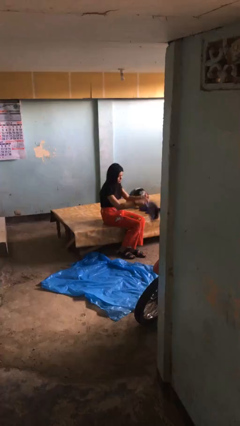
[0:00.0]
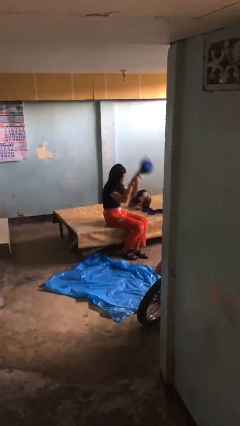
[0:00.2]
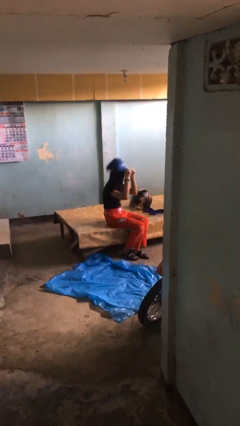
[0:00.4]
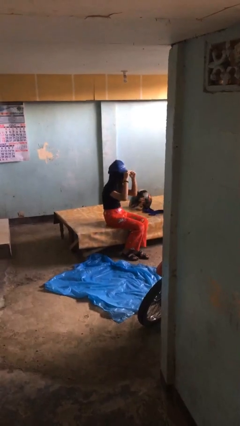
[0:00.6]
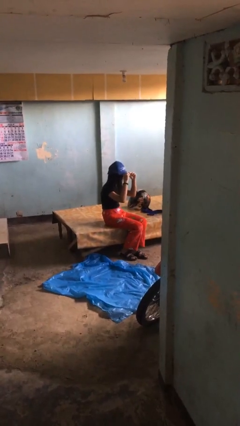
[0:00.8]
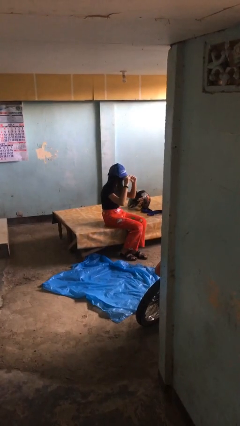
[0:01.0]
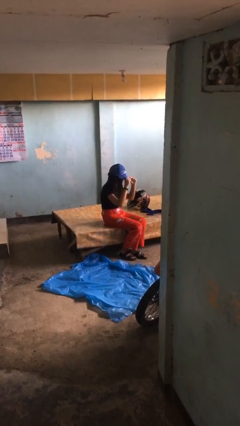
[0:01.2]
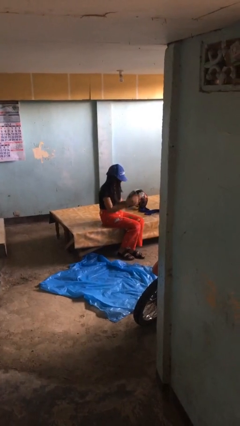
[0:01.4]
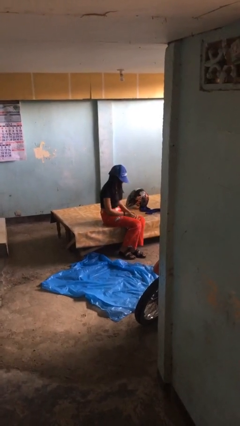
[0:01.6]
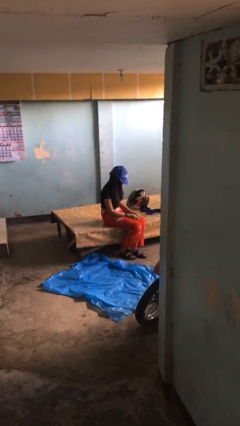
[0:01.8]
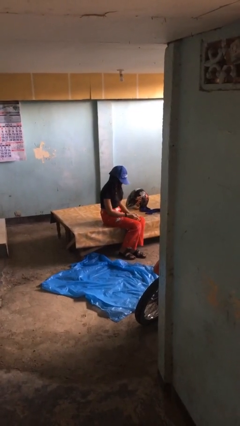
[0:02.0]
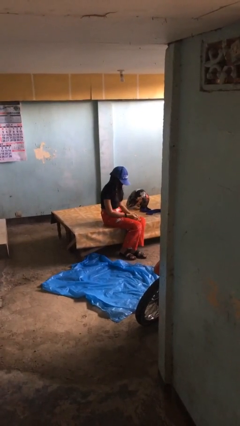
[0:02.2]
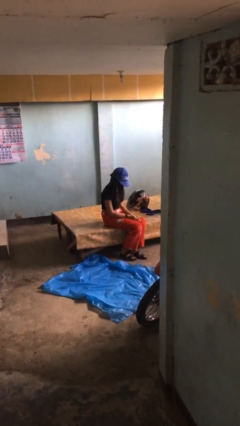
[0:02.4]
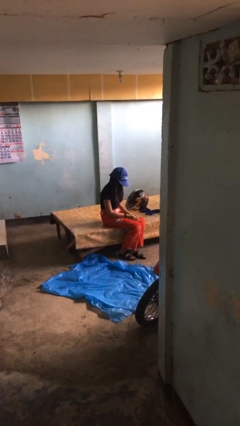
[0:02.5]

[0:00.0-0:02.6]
person puts on hat

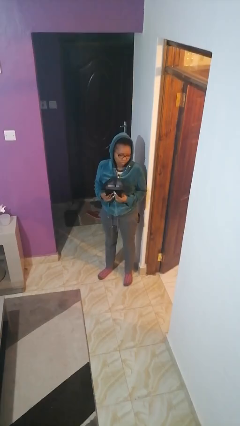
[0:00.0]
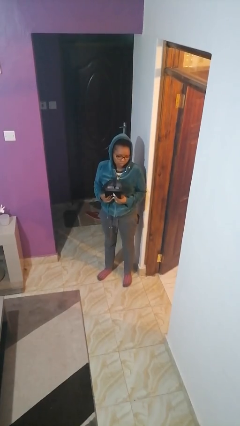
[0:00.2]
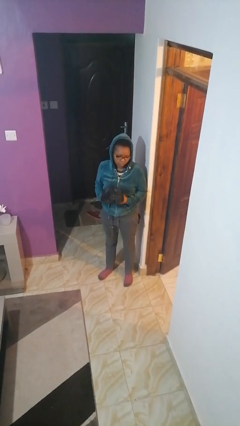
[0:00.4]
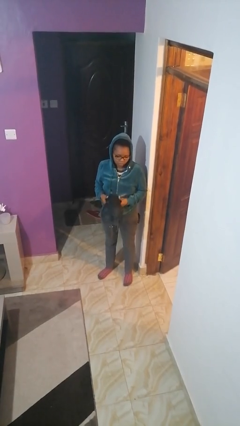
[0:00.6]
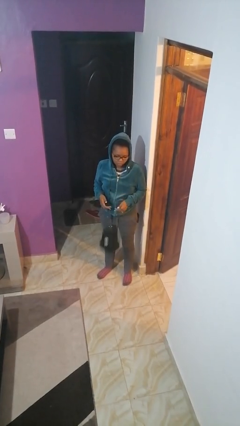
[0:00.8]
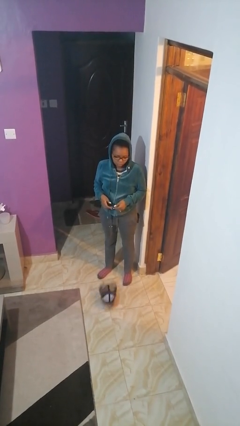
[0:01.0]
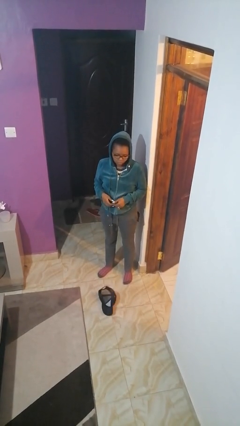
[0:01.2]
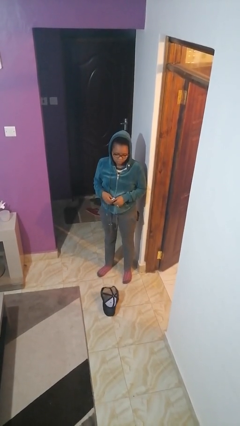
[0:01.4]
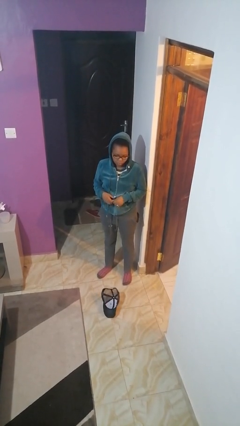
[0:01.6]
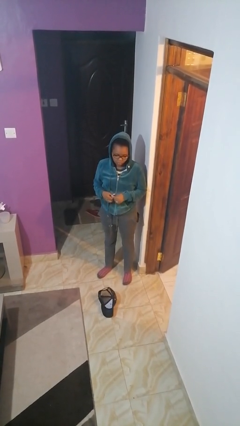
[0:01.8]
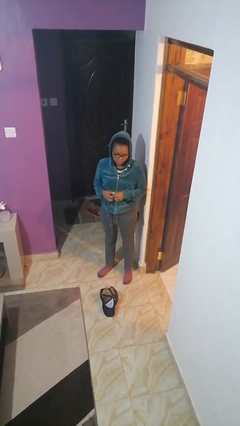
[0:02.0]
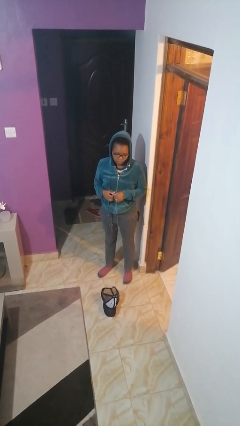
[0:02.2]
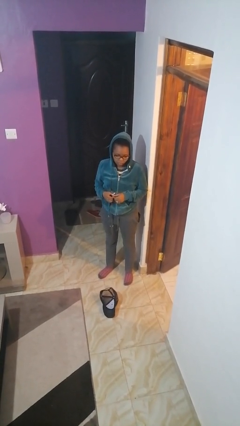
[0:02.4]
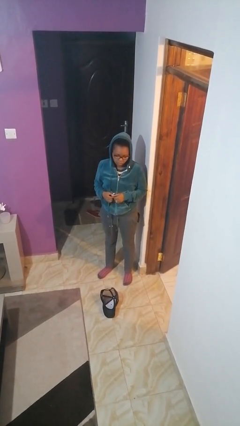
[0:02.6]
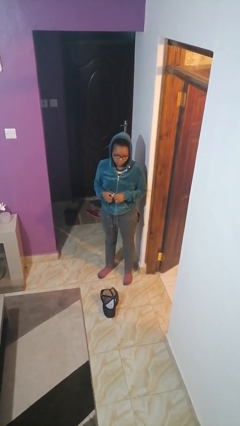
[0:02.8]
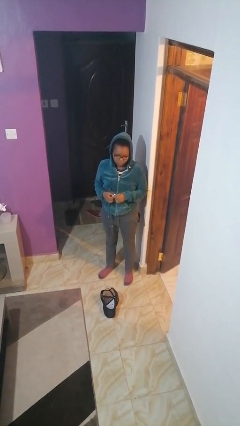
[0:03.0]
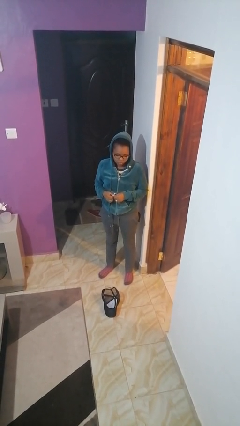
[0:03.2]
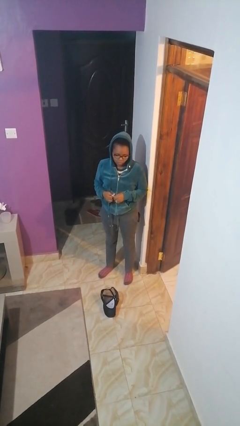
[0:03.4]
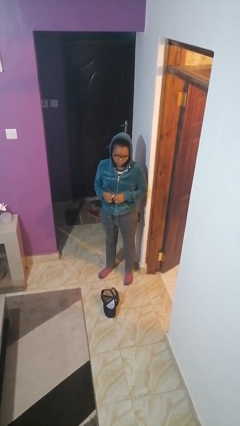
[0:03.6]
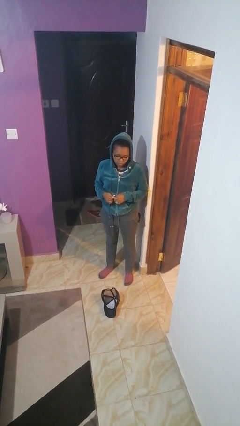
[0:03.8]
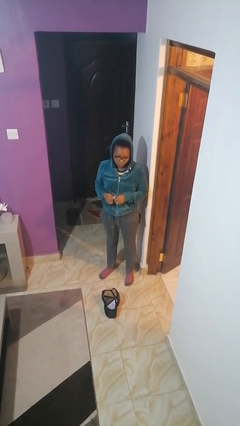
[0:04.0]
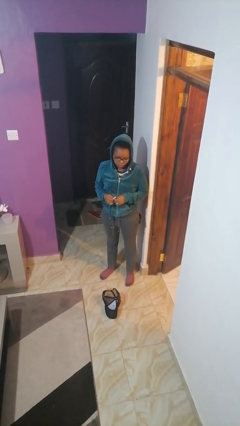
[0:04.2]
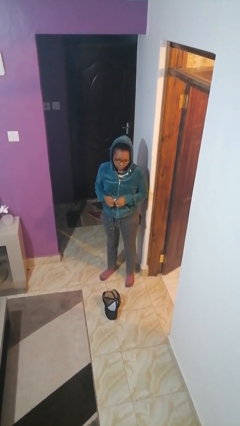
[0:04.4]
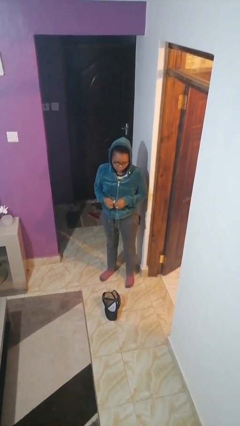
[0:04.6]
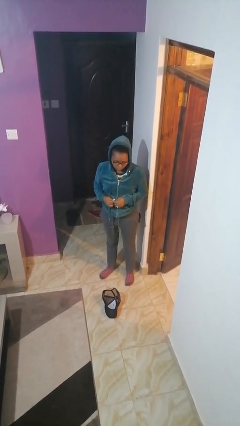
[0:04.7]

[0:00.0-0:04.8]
person drops object

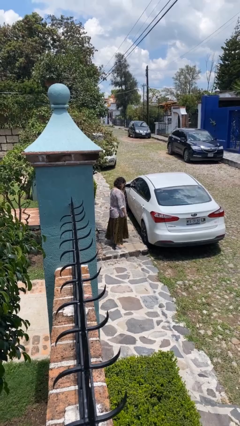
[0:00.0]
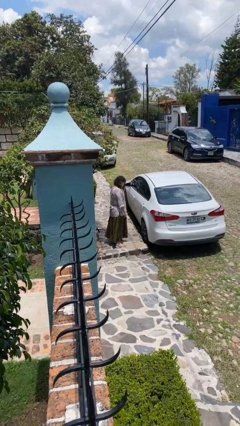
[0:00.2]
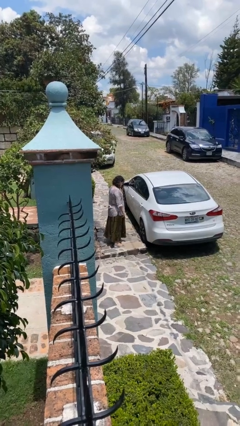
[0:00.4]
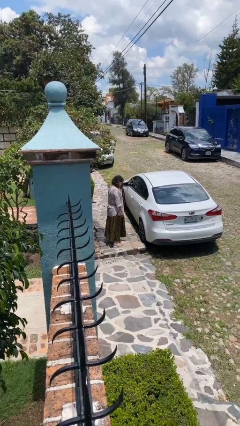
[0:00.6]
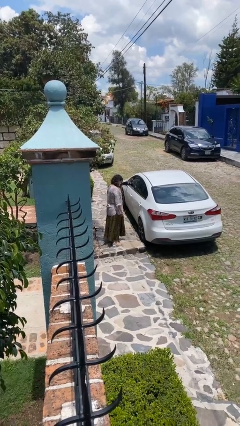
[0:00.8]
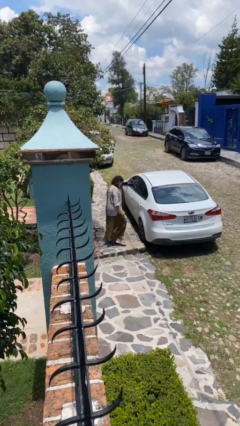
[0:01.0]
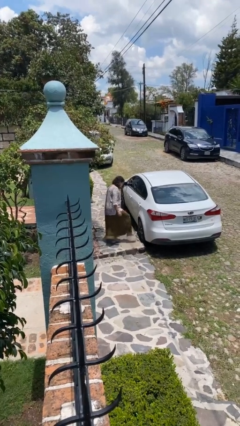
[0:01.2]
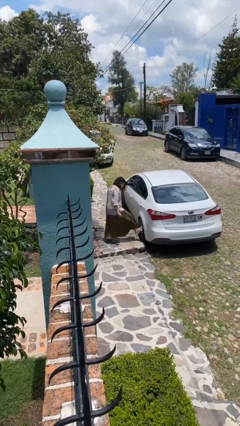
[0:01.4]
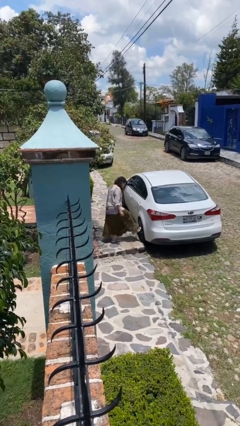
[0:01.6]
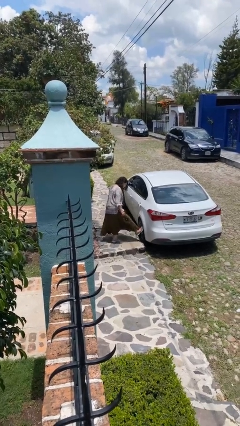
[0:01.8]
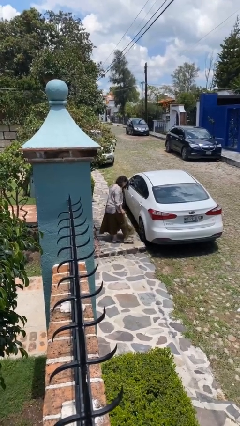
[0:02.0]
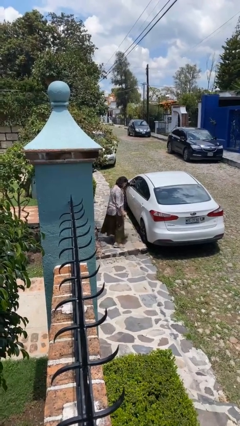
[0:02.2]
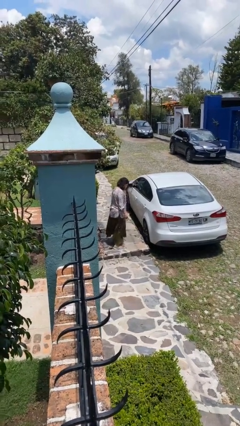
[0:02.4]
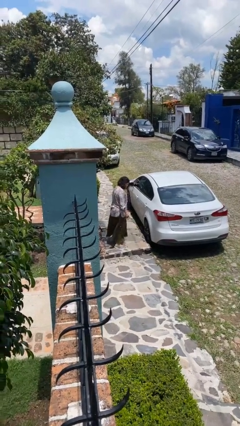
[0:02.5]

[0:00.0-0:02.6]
person kicks car tires

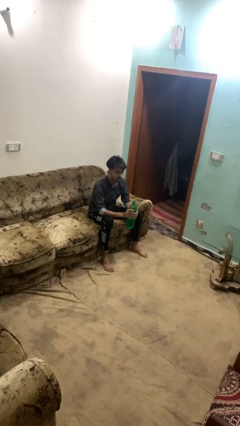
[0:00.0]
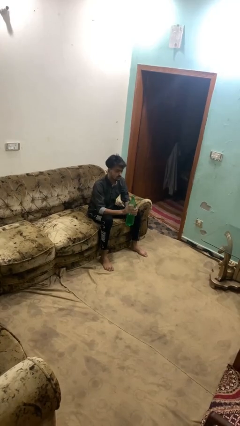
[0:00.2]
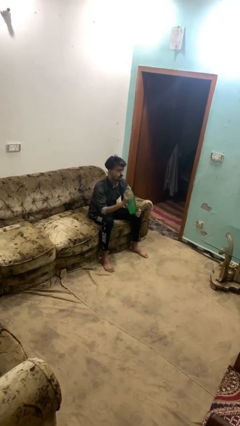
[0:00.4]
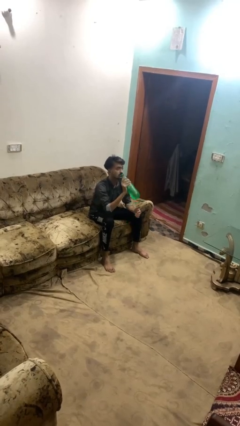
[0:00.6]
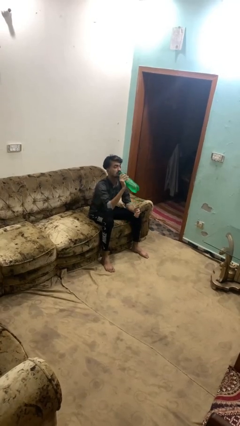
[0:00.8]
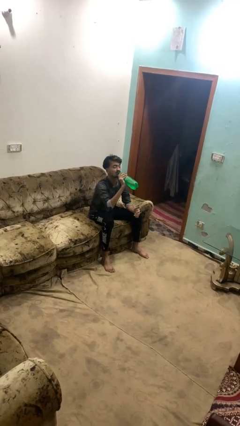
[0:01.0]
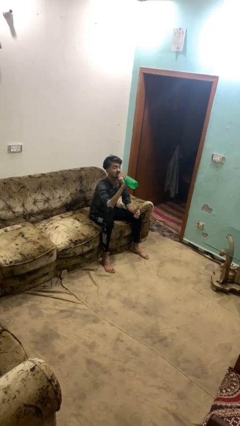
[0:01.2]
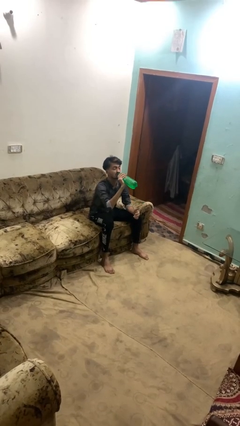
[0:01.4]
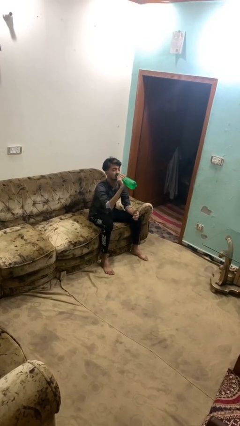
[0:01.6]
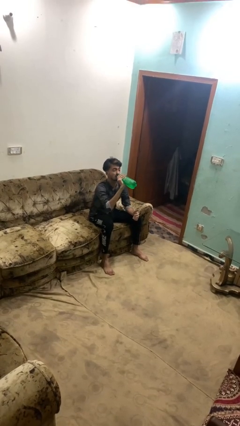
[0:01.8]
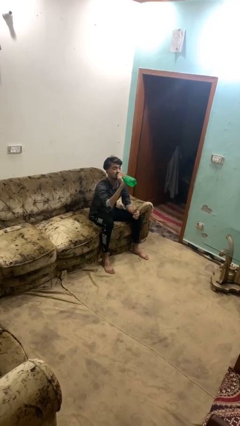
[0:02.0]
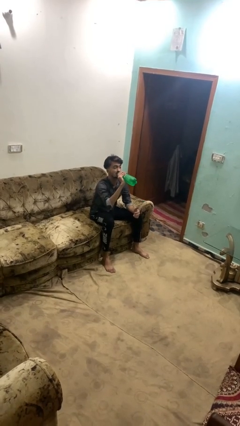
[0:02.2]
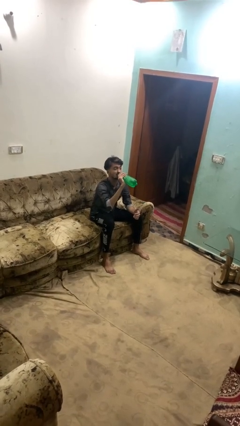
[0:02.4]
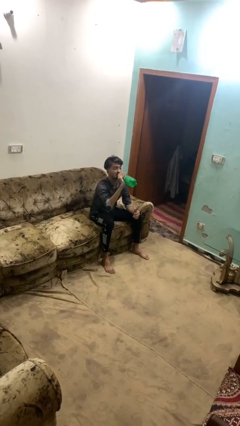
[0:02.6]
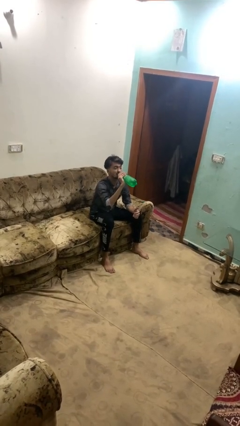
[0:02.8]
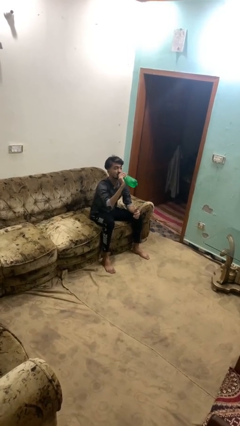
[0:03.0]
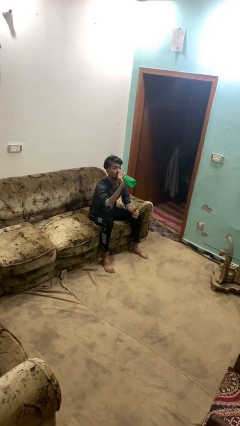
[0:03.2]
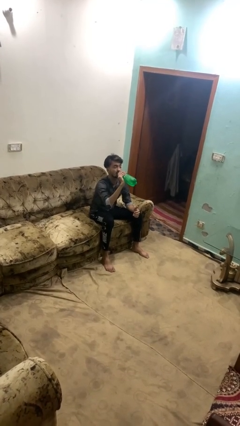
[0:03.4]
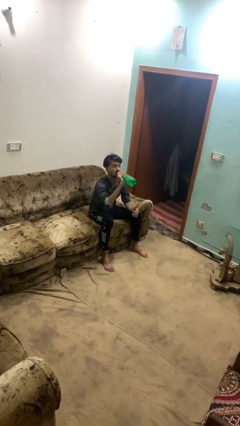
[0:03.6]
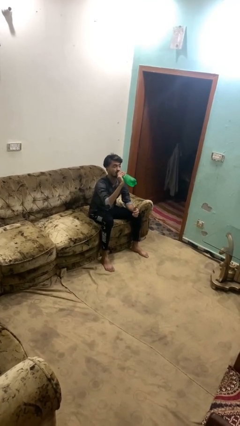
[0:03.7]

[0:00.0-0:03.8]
person drinks from bottle

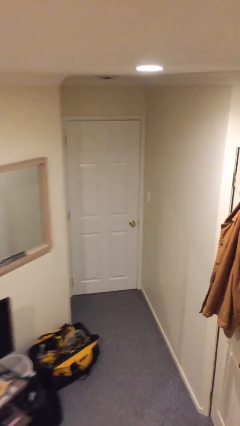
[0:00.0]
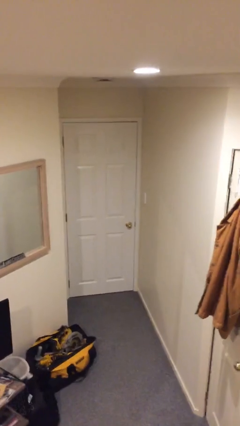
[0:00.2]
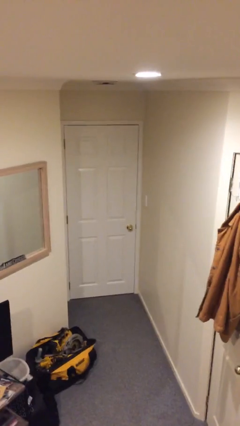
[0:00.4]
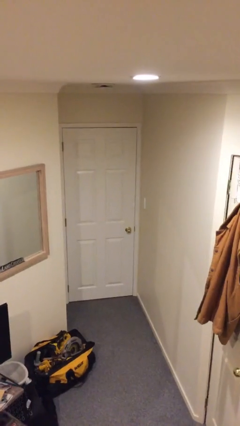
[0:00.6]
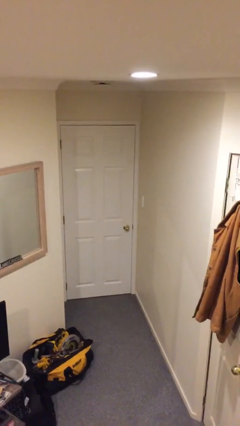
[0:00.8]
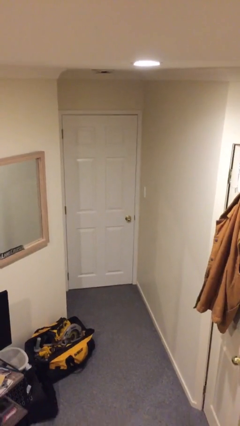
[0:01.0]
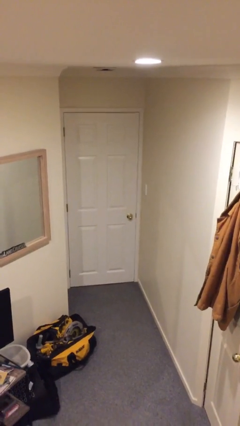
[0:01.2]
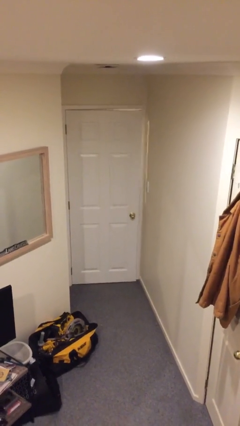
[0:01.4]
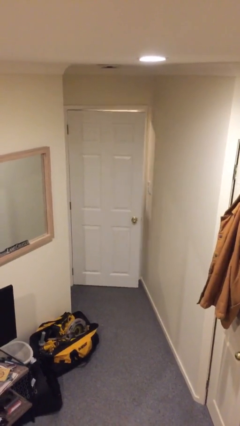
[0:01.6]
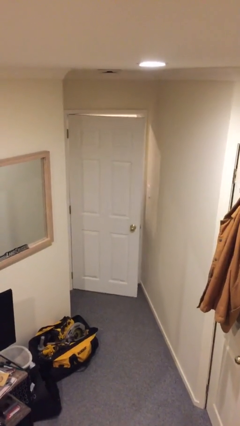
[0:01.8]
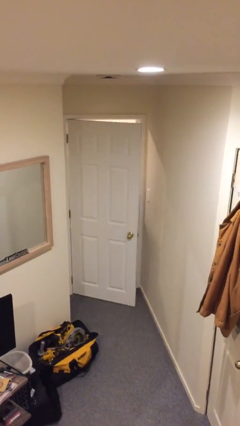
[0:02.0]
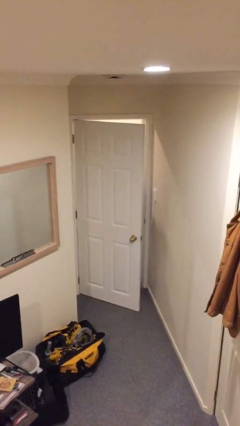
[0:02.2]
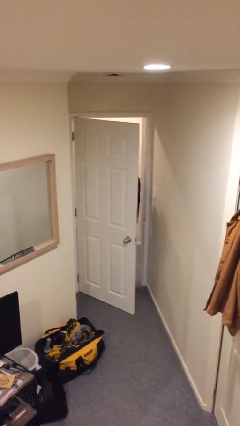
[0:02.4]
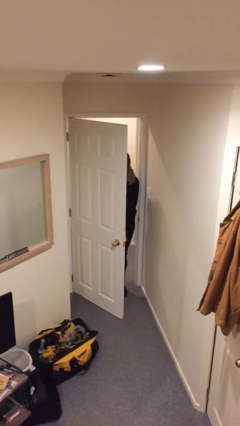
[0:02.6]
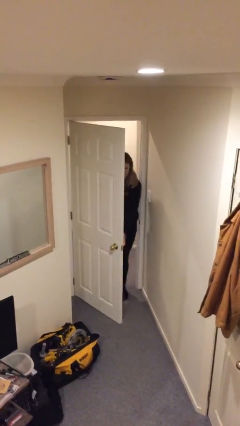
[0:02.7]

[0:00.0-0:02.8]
person opens facility door

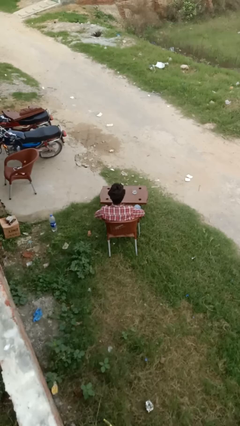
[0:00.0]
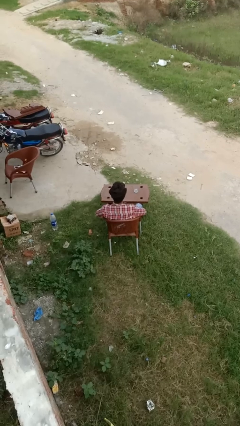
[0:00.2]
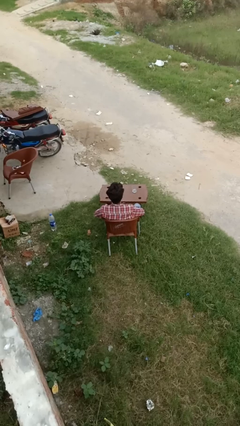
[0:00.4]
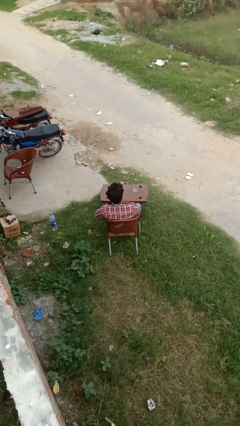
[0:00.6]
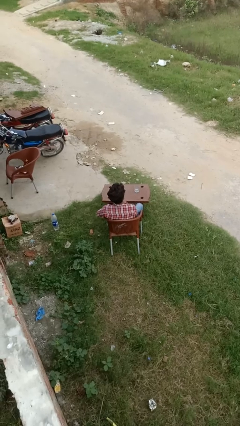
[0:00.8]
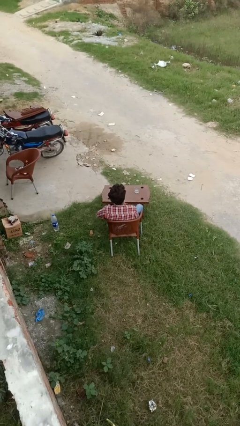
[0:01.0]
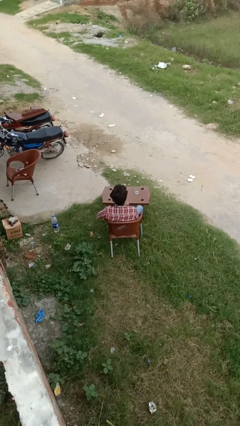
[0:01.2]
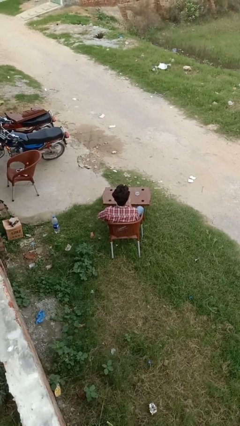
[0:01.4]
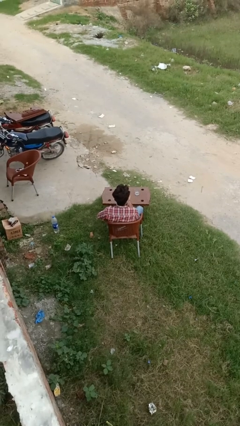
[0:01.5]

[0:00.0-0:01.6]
person takes medicine pills
